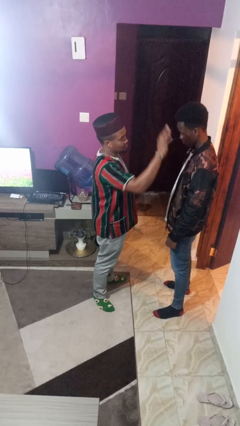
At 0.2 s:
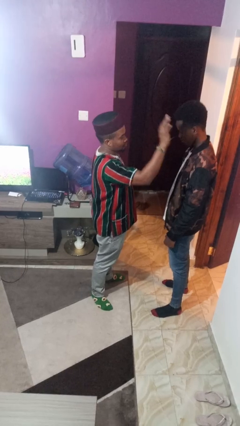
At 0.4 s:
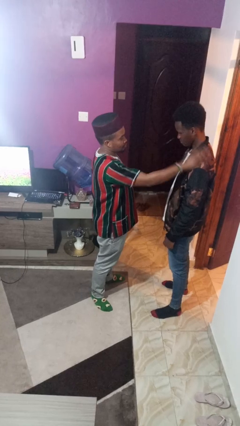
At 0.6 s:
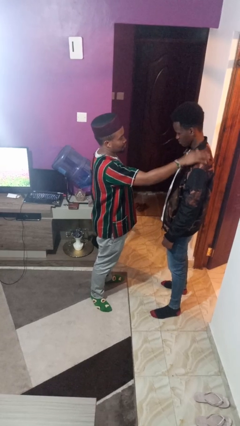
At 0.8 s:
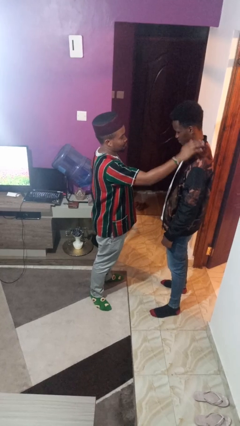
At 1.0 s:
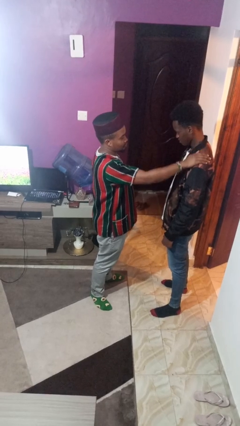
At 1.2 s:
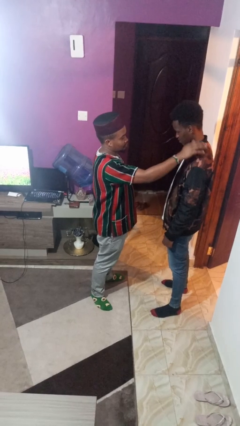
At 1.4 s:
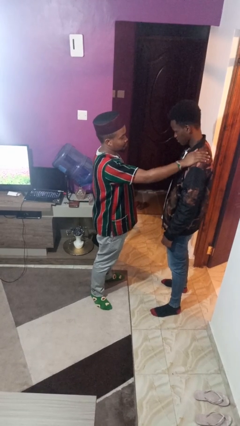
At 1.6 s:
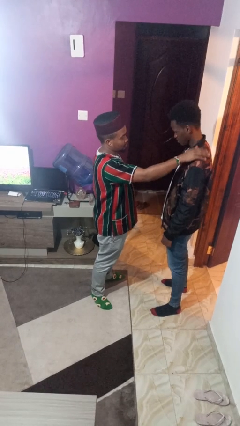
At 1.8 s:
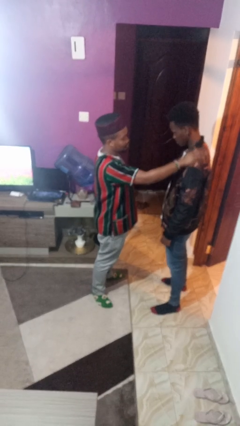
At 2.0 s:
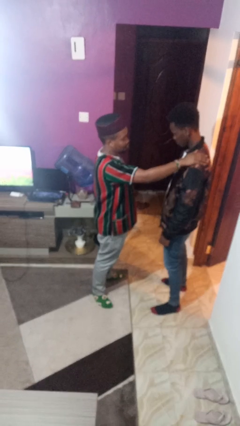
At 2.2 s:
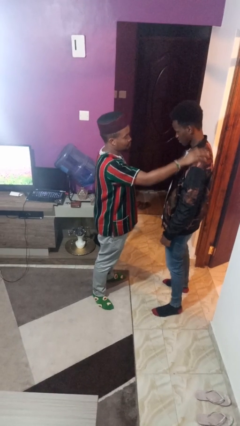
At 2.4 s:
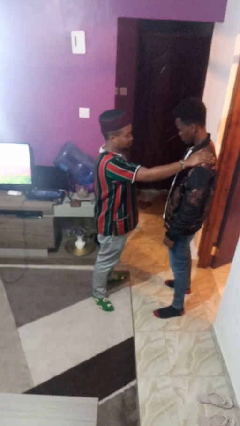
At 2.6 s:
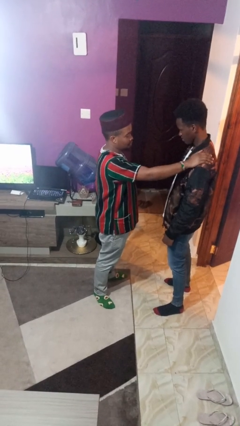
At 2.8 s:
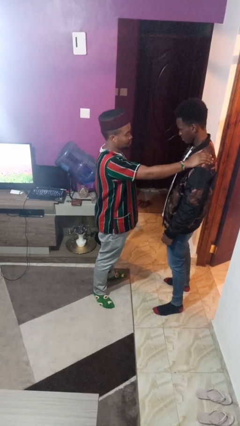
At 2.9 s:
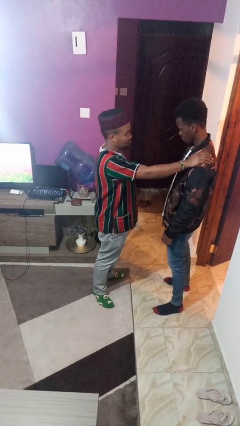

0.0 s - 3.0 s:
person opens facility door

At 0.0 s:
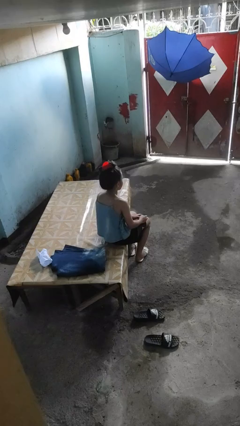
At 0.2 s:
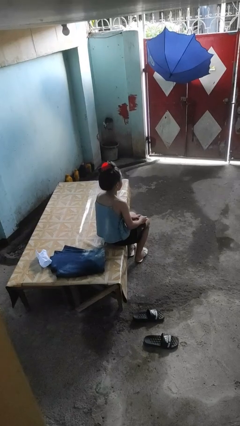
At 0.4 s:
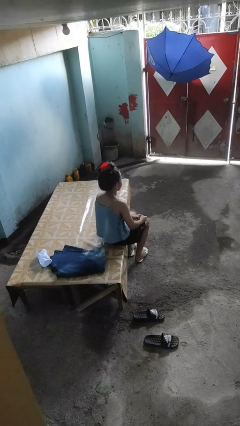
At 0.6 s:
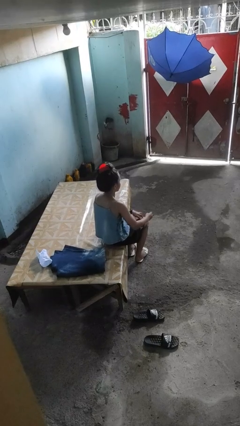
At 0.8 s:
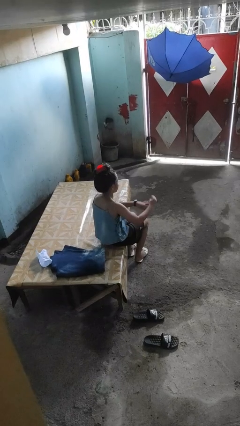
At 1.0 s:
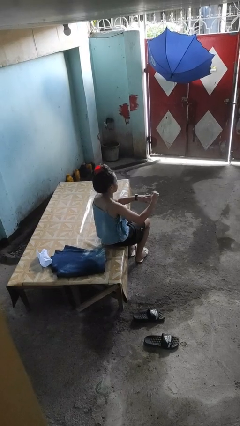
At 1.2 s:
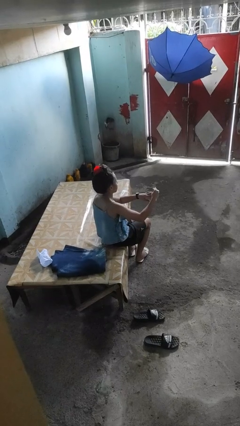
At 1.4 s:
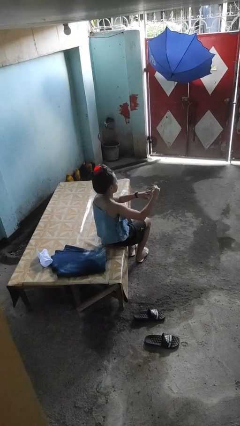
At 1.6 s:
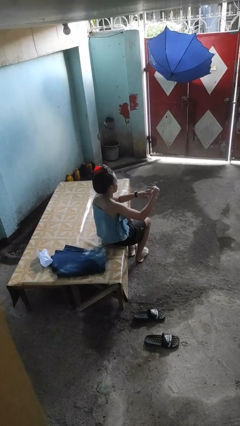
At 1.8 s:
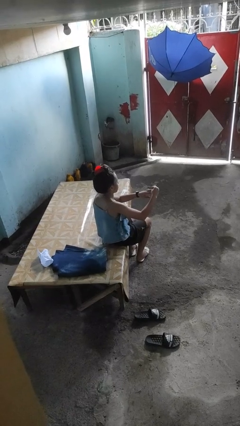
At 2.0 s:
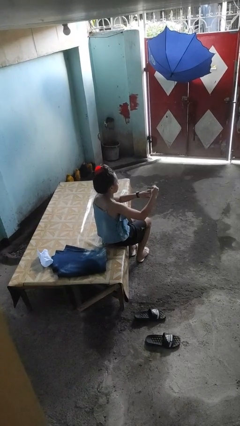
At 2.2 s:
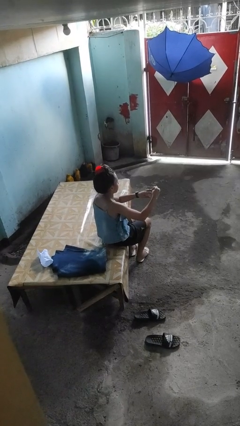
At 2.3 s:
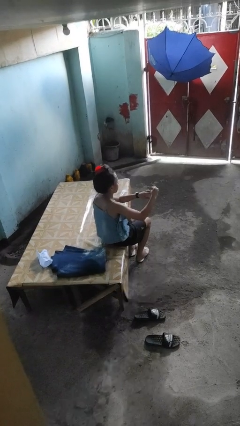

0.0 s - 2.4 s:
person clips fingernails

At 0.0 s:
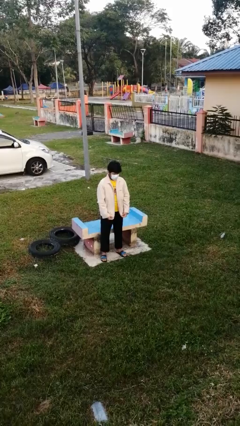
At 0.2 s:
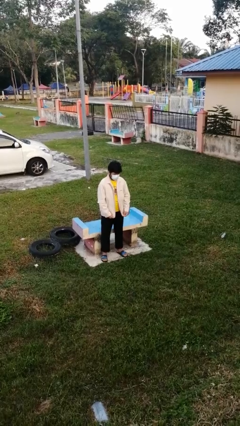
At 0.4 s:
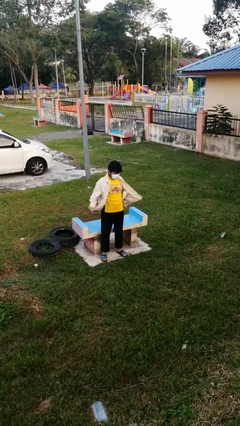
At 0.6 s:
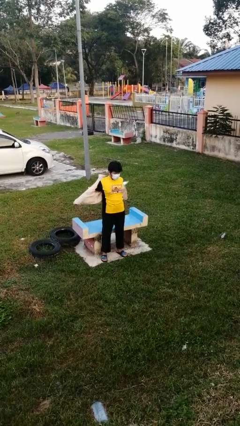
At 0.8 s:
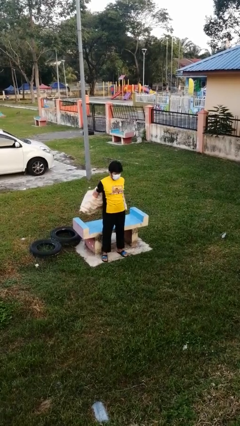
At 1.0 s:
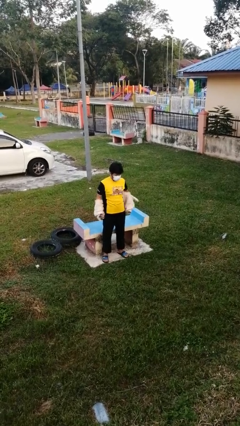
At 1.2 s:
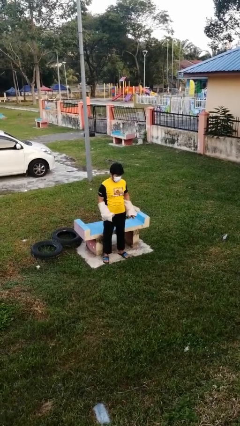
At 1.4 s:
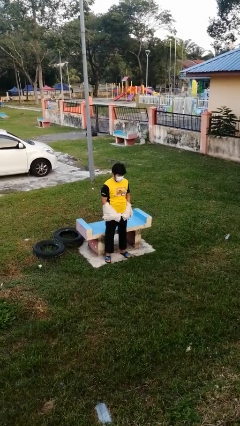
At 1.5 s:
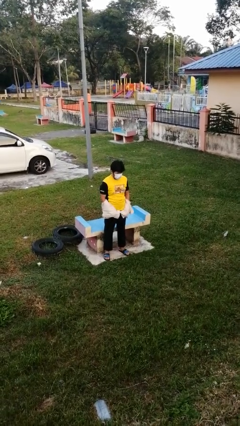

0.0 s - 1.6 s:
person takes off jacket

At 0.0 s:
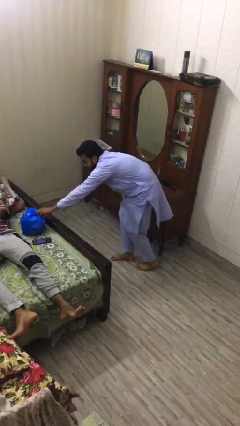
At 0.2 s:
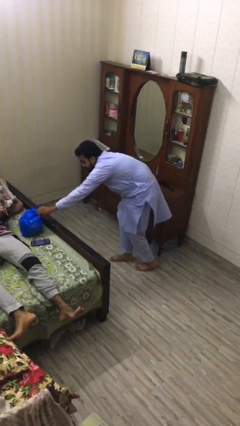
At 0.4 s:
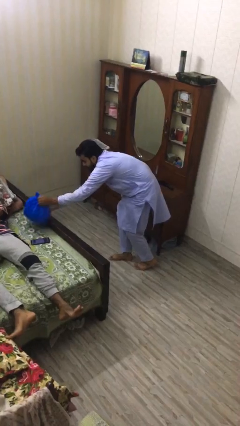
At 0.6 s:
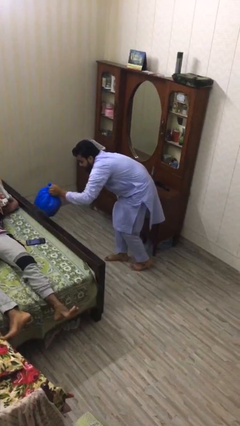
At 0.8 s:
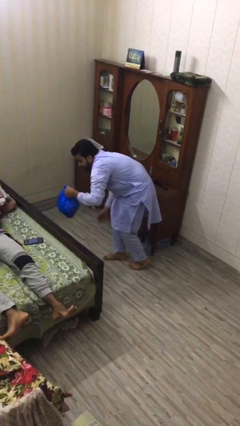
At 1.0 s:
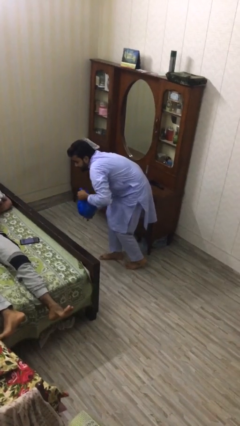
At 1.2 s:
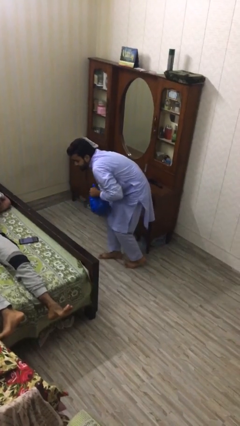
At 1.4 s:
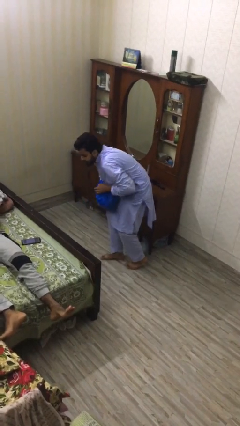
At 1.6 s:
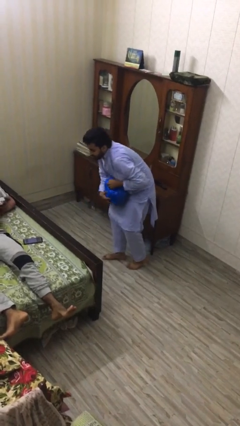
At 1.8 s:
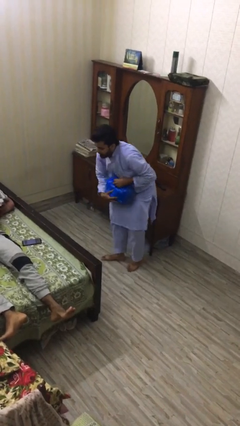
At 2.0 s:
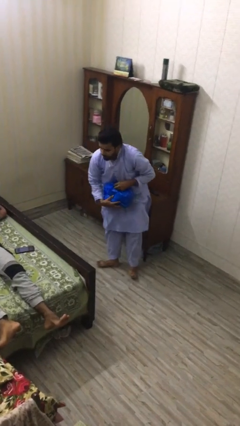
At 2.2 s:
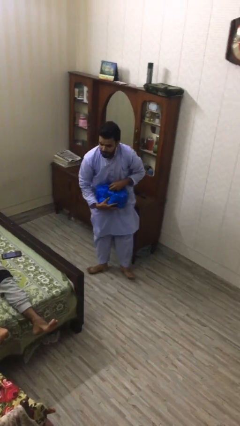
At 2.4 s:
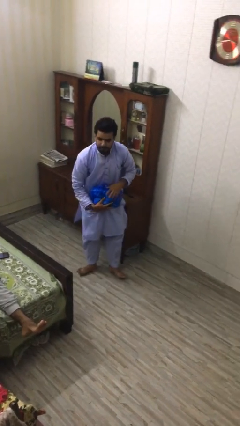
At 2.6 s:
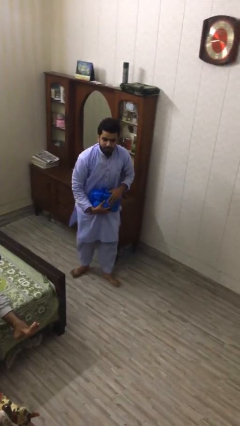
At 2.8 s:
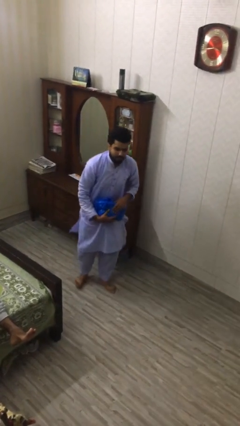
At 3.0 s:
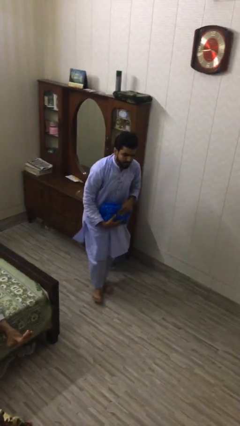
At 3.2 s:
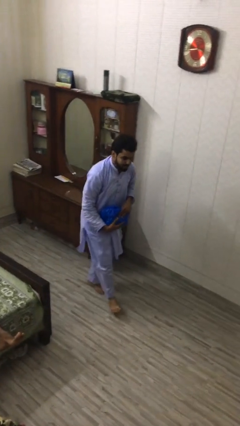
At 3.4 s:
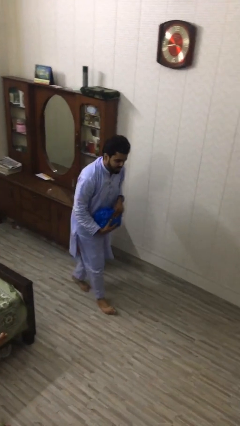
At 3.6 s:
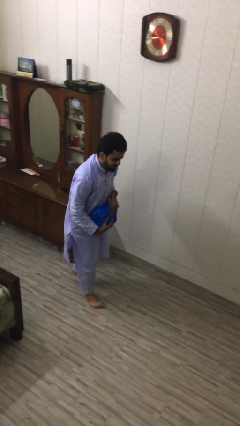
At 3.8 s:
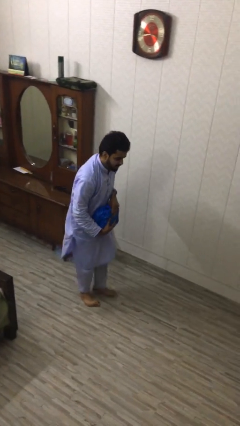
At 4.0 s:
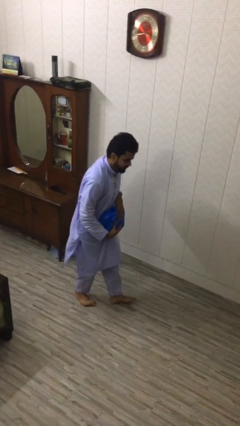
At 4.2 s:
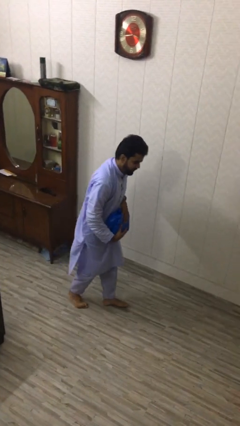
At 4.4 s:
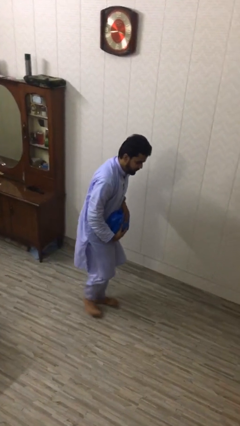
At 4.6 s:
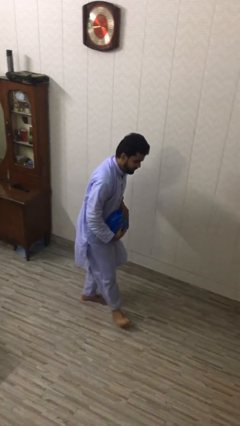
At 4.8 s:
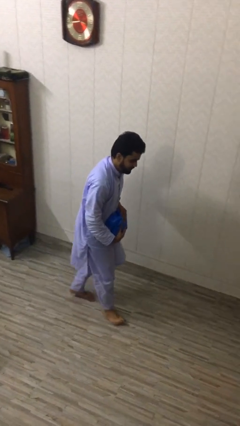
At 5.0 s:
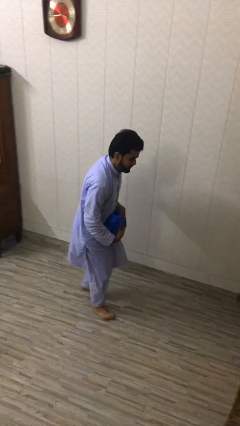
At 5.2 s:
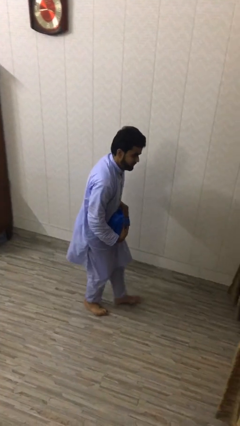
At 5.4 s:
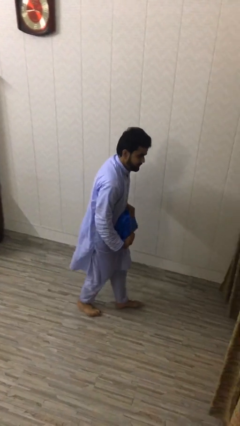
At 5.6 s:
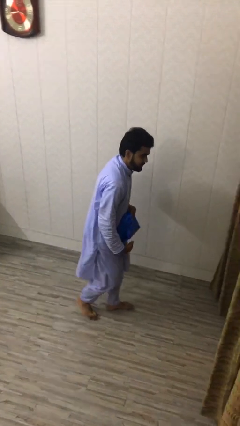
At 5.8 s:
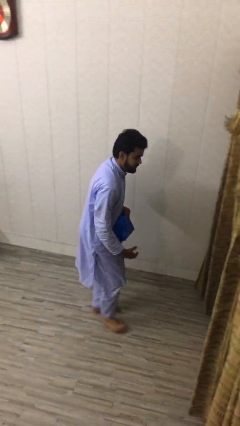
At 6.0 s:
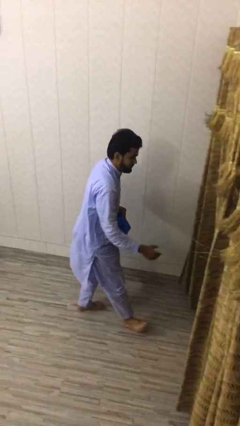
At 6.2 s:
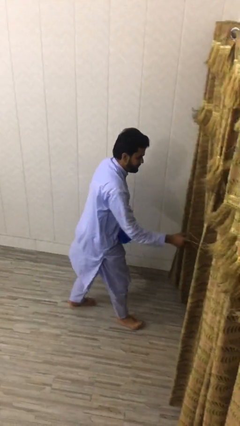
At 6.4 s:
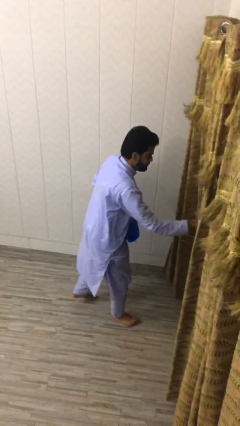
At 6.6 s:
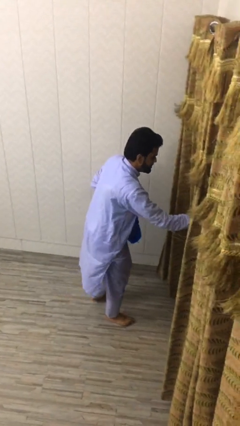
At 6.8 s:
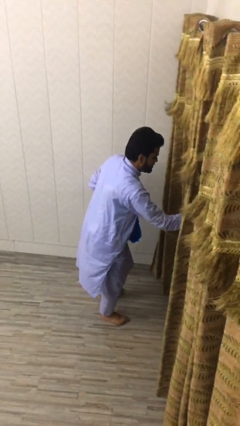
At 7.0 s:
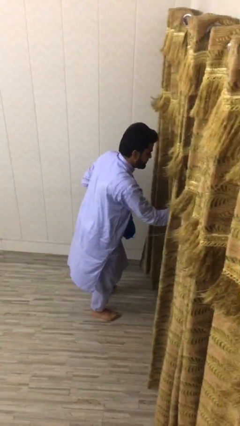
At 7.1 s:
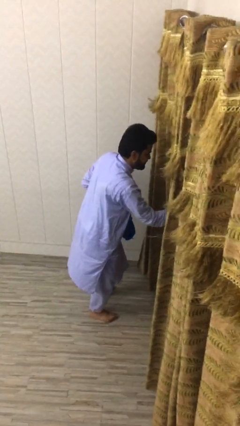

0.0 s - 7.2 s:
person steals object from person

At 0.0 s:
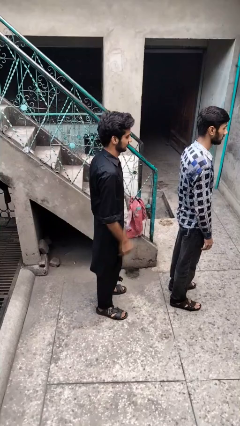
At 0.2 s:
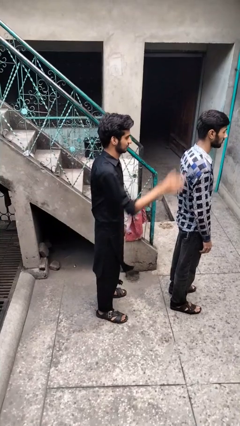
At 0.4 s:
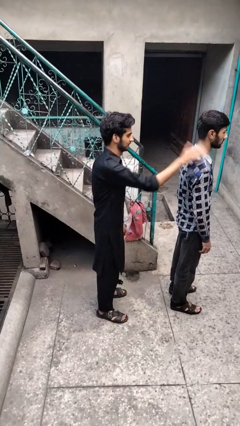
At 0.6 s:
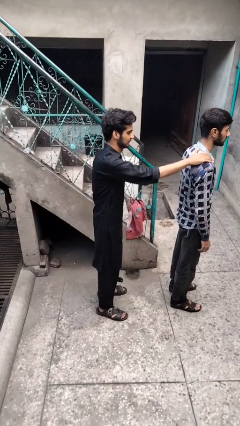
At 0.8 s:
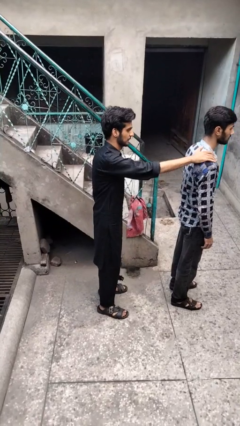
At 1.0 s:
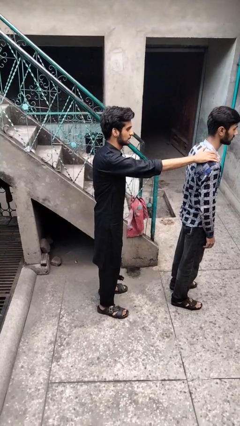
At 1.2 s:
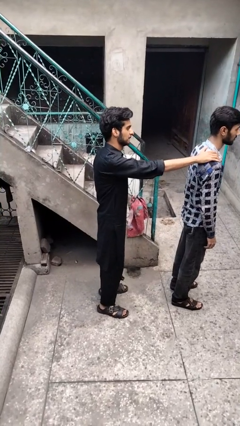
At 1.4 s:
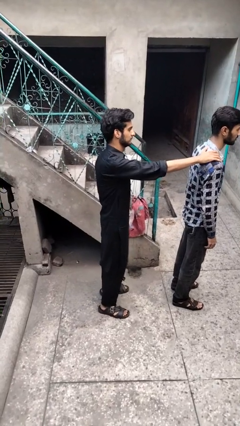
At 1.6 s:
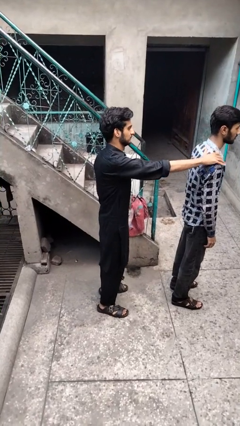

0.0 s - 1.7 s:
person grabs person by shoulder

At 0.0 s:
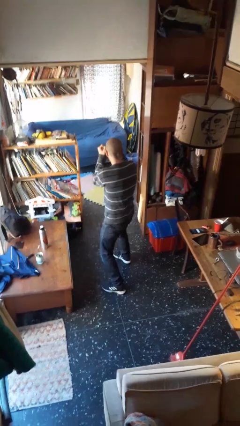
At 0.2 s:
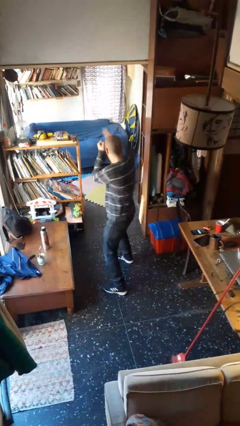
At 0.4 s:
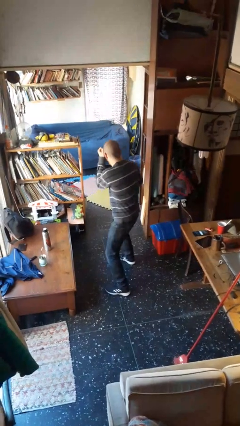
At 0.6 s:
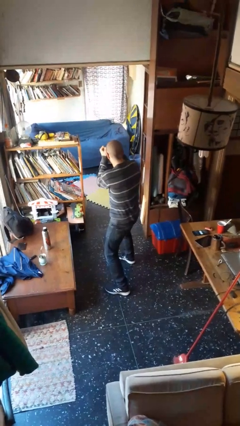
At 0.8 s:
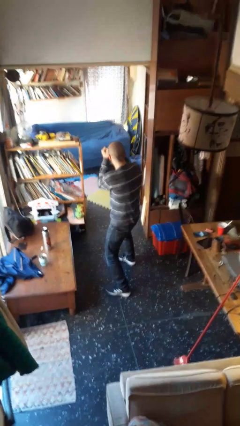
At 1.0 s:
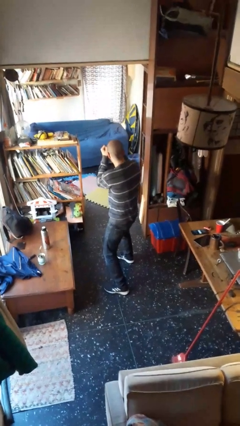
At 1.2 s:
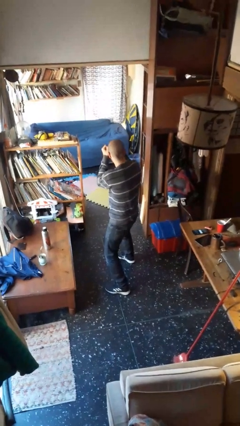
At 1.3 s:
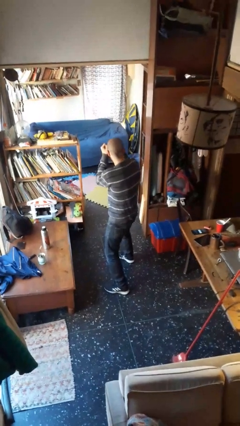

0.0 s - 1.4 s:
person punches
